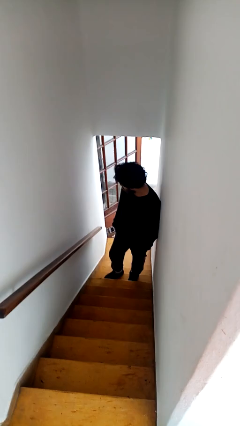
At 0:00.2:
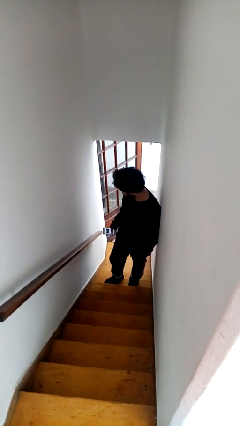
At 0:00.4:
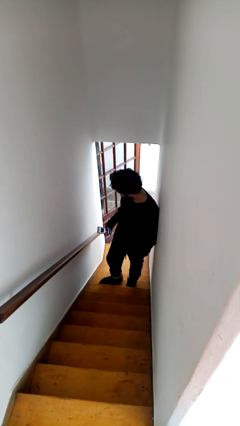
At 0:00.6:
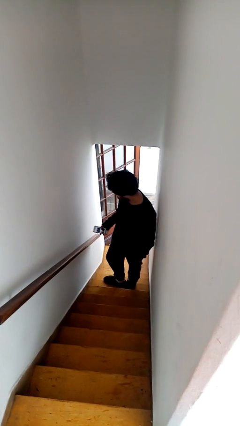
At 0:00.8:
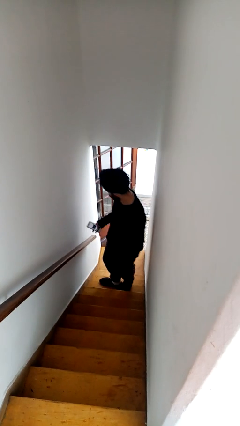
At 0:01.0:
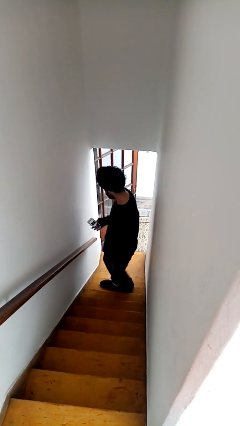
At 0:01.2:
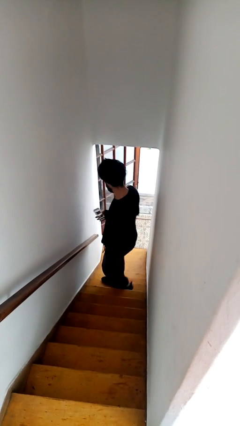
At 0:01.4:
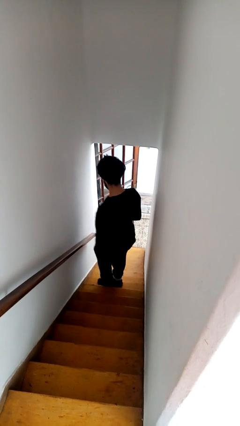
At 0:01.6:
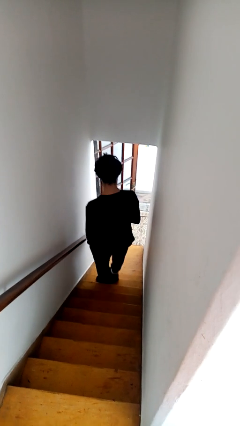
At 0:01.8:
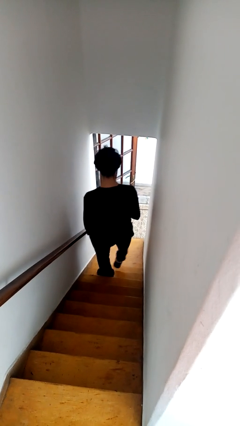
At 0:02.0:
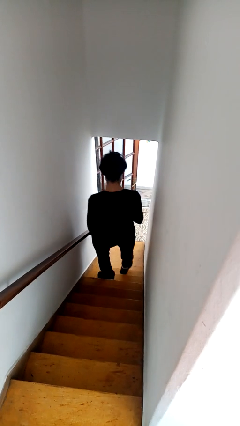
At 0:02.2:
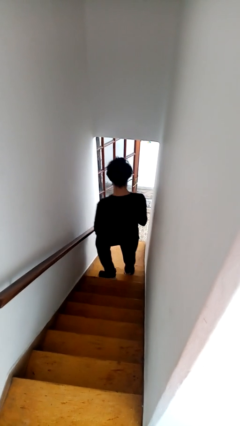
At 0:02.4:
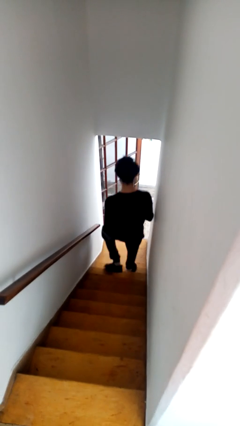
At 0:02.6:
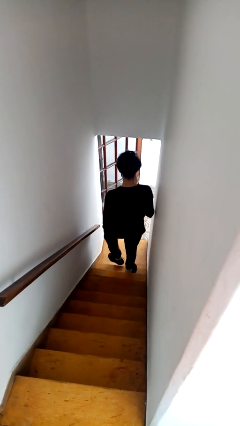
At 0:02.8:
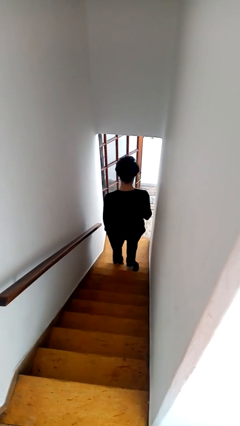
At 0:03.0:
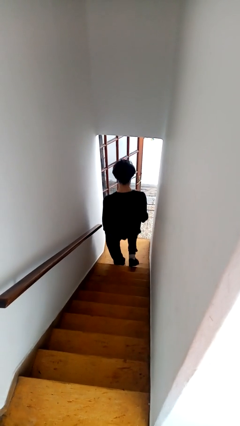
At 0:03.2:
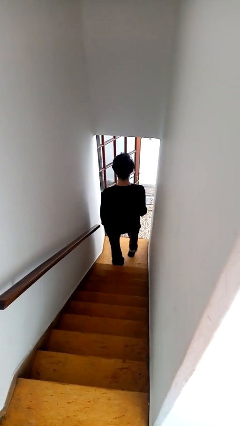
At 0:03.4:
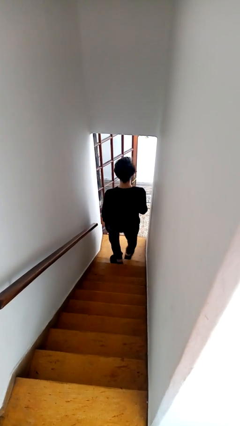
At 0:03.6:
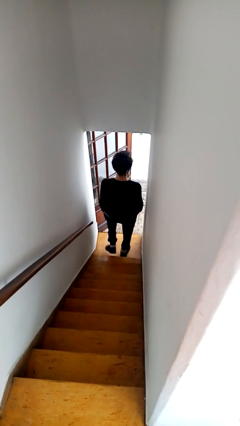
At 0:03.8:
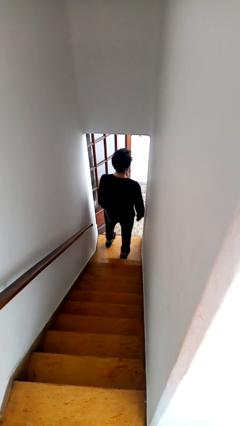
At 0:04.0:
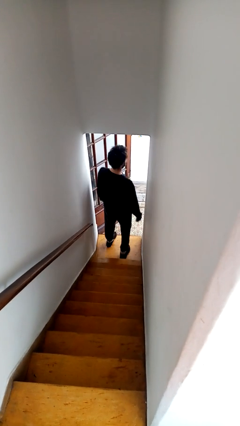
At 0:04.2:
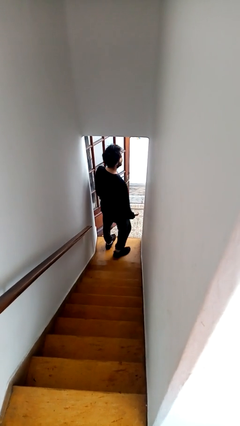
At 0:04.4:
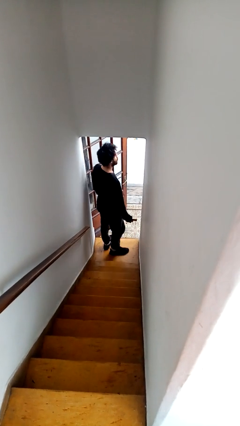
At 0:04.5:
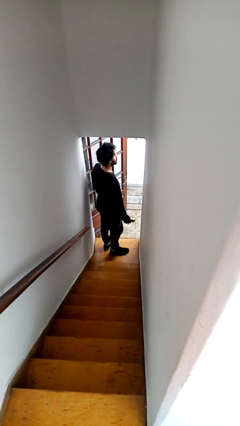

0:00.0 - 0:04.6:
person climbs down stairs

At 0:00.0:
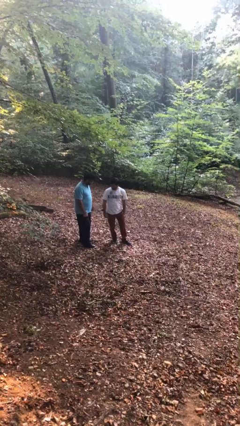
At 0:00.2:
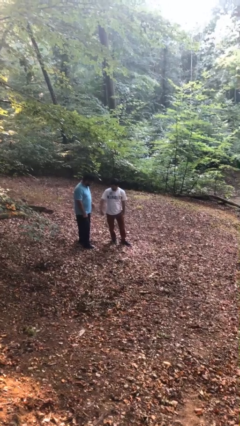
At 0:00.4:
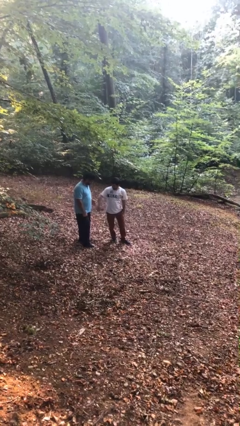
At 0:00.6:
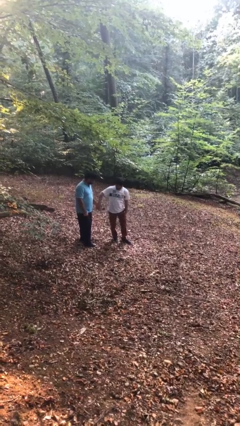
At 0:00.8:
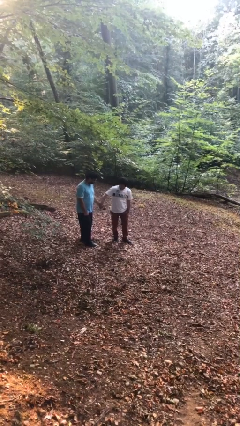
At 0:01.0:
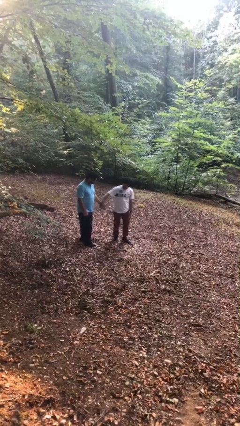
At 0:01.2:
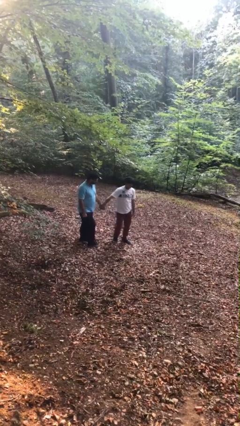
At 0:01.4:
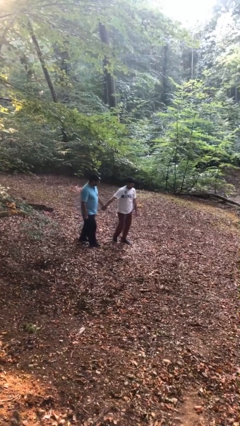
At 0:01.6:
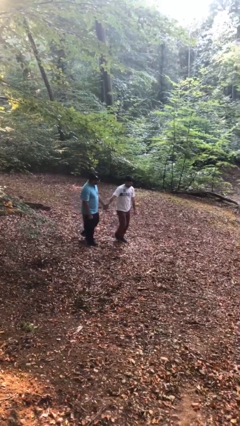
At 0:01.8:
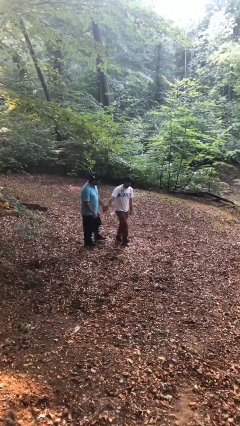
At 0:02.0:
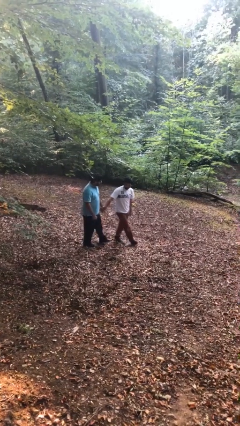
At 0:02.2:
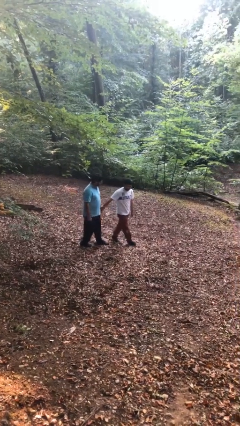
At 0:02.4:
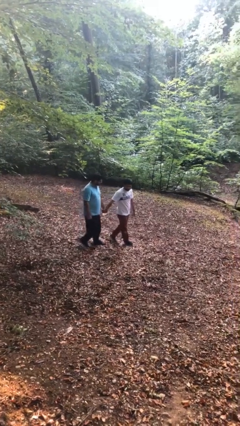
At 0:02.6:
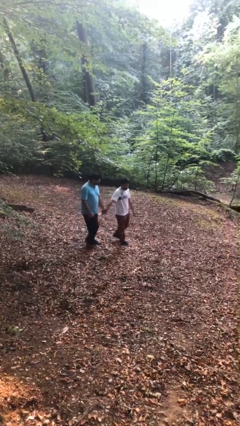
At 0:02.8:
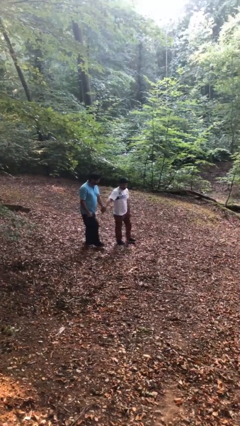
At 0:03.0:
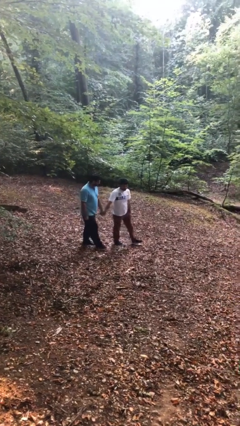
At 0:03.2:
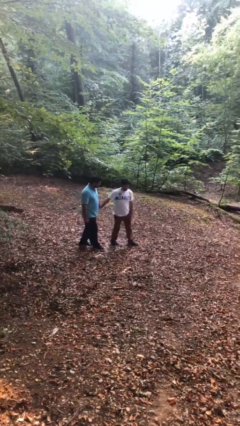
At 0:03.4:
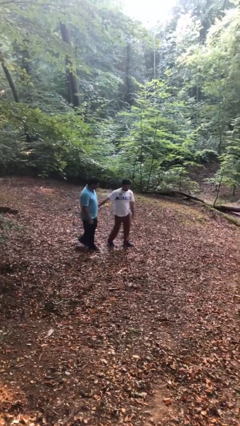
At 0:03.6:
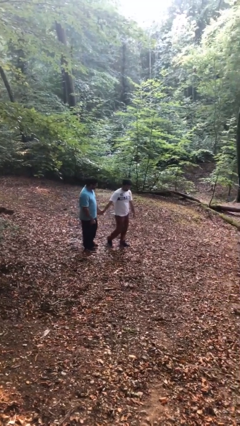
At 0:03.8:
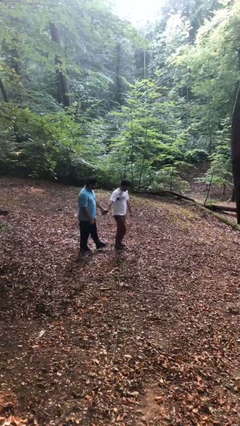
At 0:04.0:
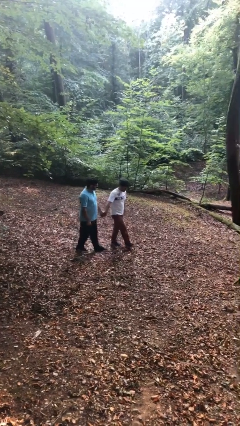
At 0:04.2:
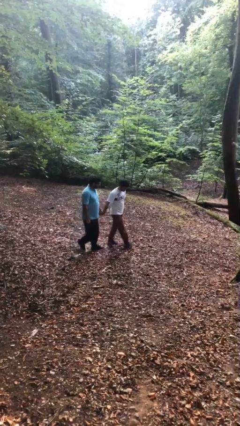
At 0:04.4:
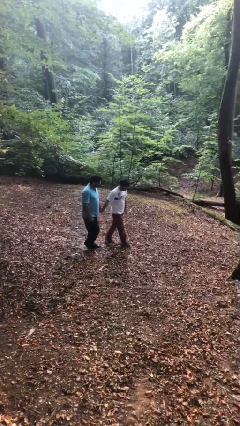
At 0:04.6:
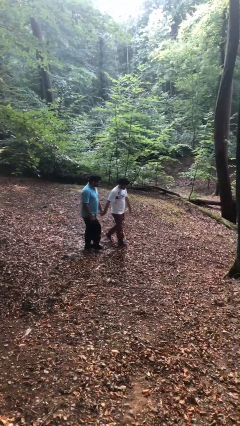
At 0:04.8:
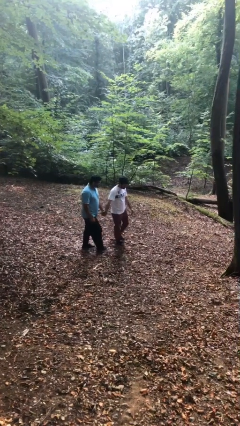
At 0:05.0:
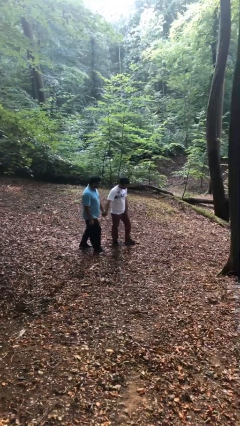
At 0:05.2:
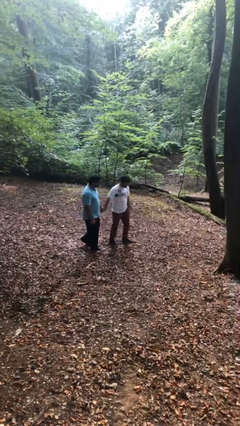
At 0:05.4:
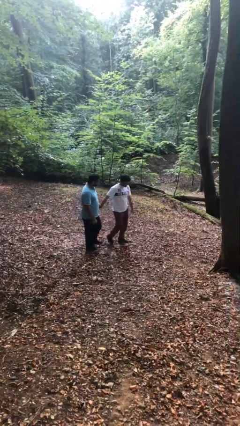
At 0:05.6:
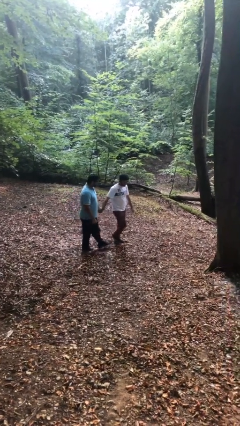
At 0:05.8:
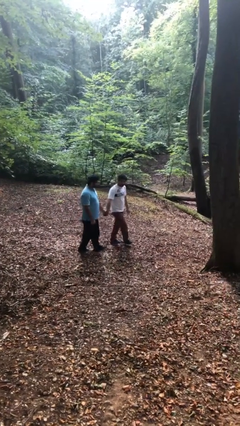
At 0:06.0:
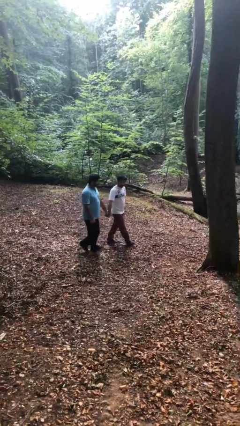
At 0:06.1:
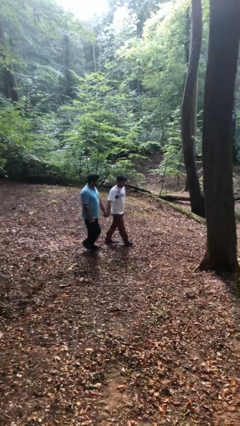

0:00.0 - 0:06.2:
person holds hand

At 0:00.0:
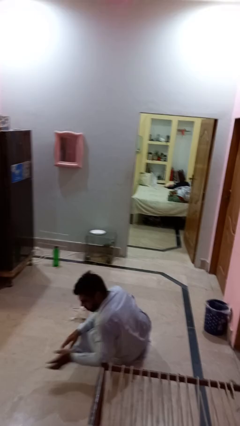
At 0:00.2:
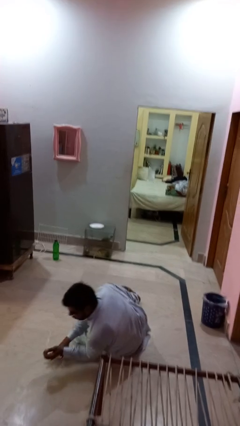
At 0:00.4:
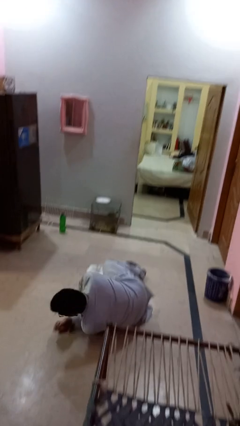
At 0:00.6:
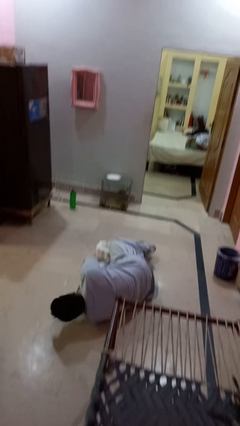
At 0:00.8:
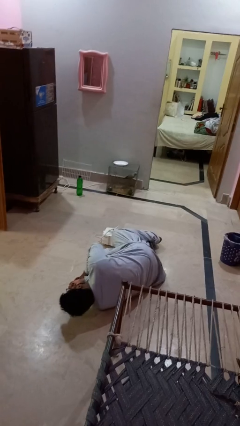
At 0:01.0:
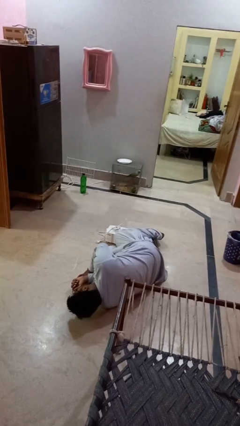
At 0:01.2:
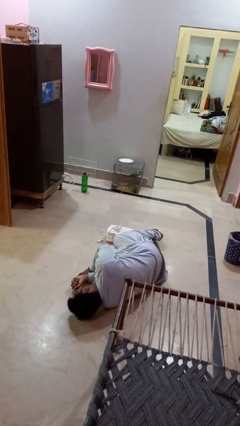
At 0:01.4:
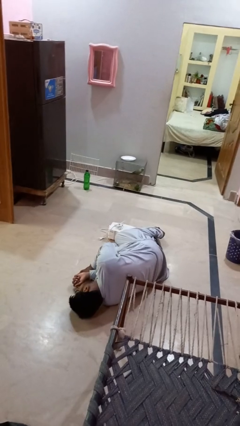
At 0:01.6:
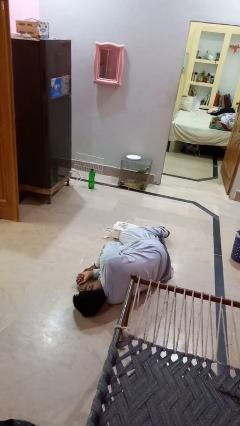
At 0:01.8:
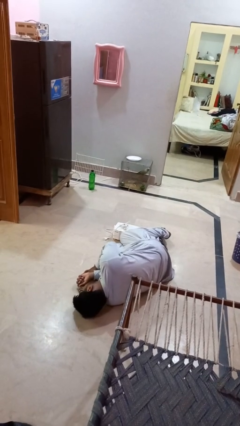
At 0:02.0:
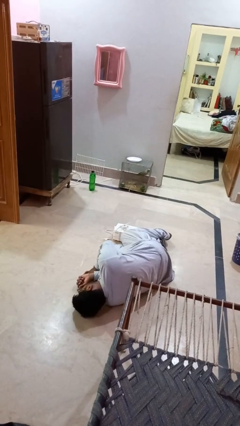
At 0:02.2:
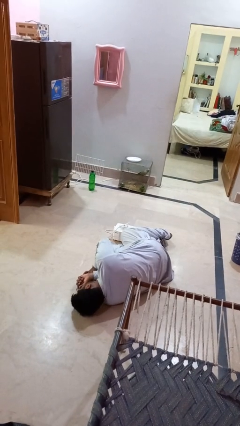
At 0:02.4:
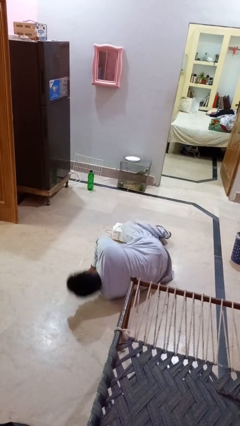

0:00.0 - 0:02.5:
person lies down on floor

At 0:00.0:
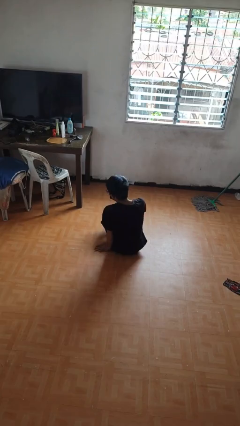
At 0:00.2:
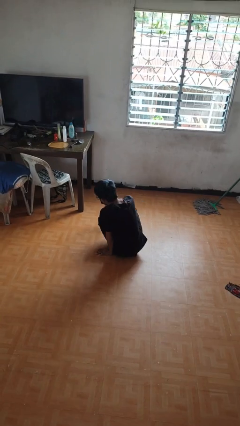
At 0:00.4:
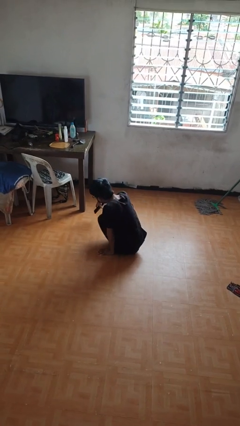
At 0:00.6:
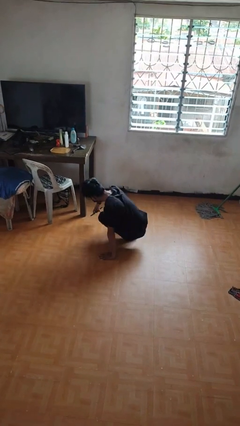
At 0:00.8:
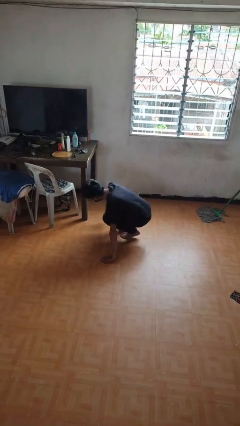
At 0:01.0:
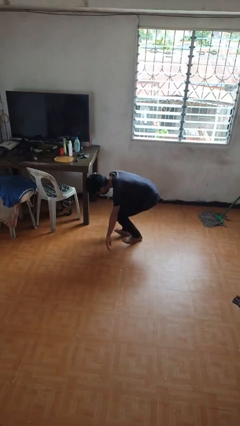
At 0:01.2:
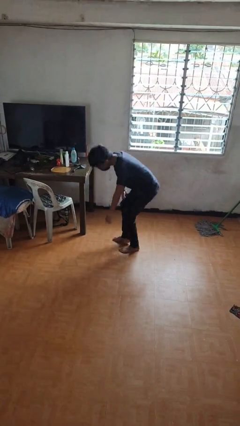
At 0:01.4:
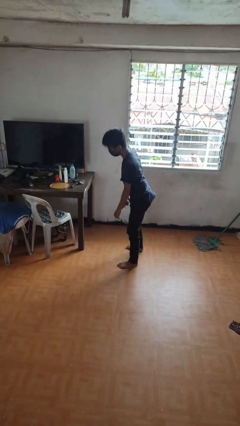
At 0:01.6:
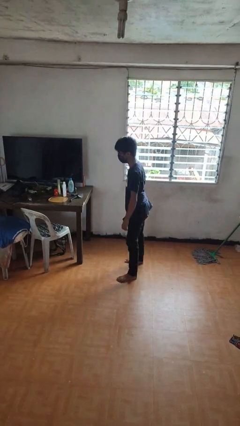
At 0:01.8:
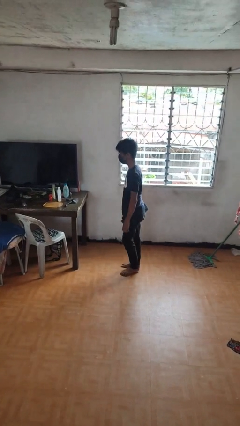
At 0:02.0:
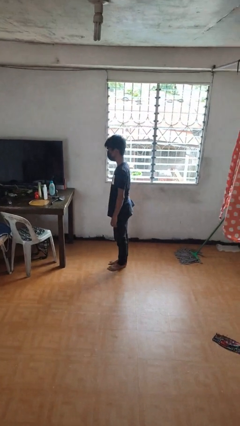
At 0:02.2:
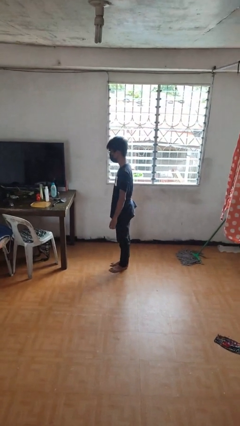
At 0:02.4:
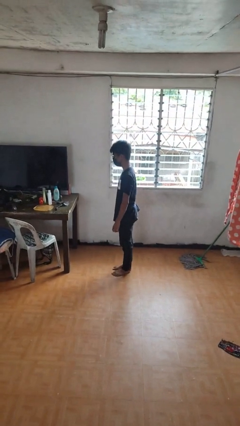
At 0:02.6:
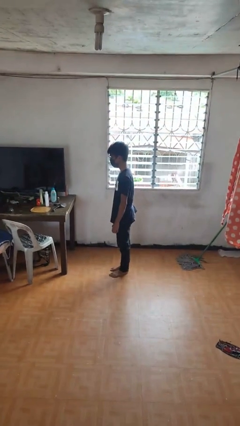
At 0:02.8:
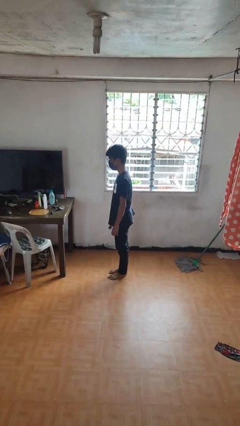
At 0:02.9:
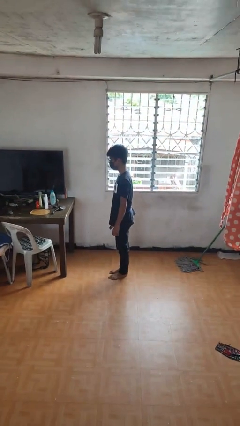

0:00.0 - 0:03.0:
person stands up from floor

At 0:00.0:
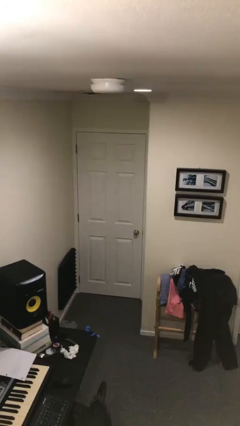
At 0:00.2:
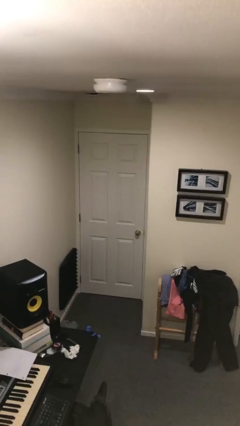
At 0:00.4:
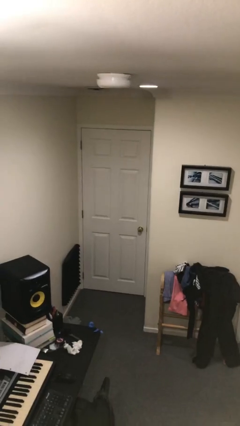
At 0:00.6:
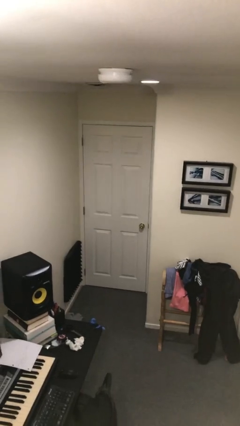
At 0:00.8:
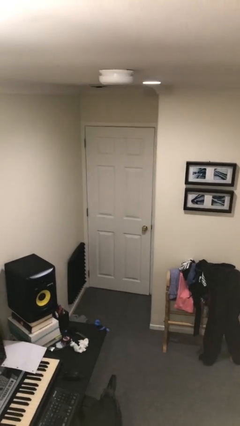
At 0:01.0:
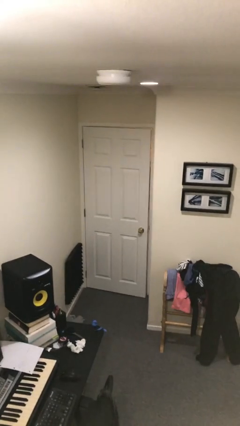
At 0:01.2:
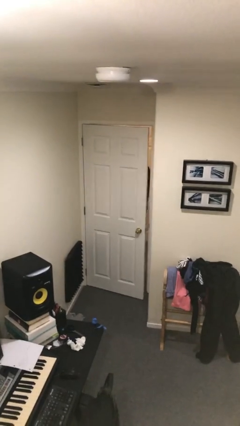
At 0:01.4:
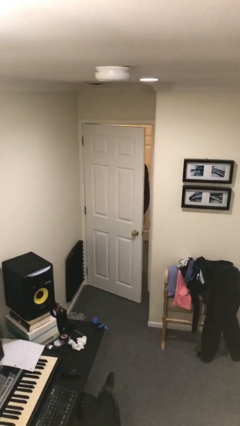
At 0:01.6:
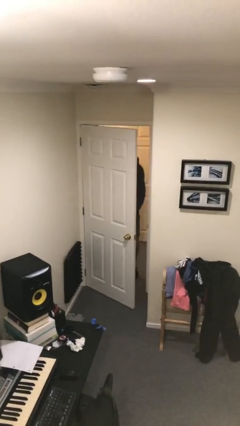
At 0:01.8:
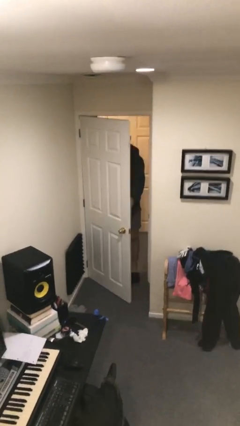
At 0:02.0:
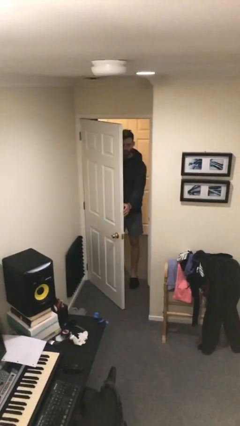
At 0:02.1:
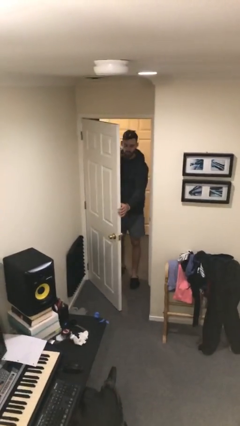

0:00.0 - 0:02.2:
person opens facility door
